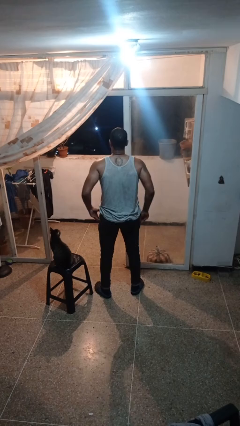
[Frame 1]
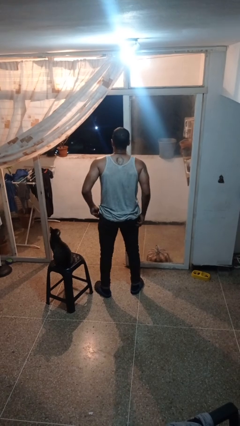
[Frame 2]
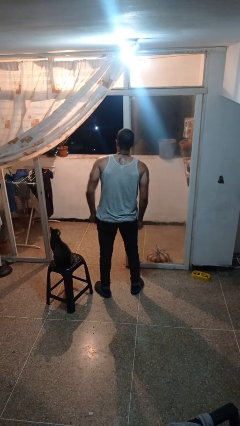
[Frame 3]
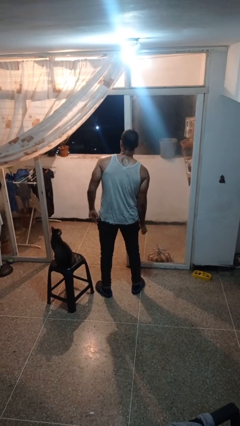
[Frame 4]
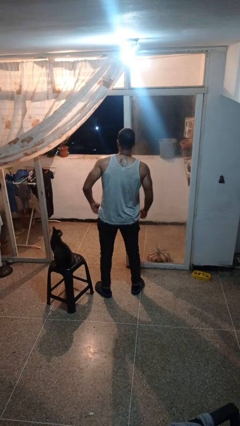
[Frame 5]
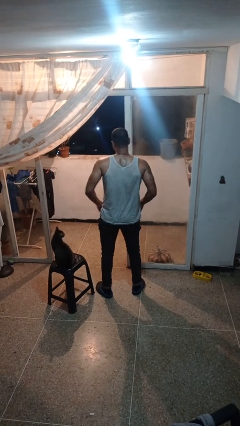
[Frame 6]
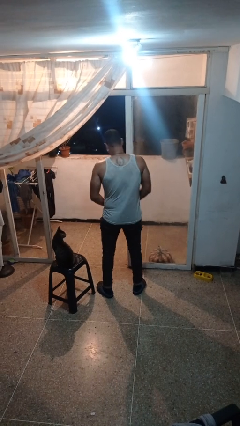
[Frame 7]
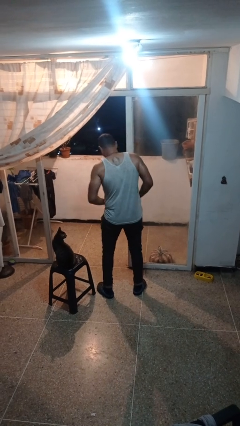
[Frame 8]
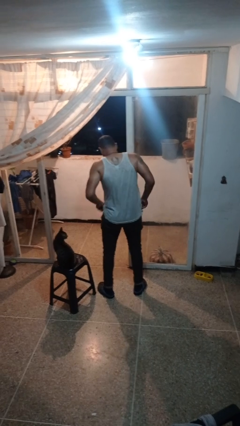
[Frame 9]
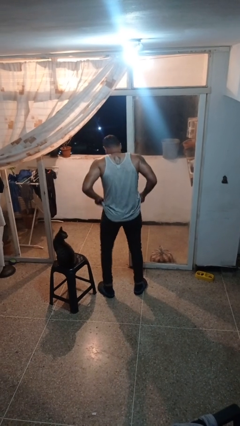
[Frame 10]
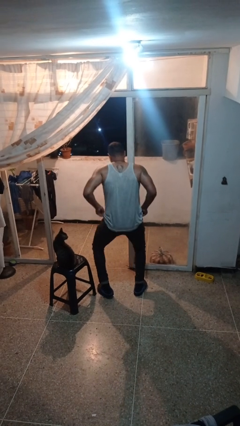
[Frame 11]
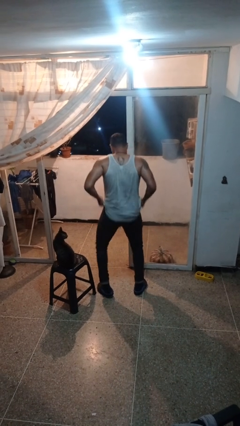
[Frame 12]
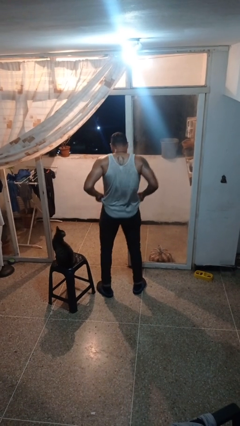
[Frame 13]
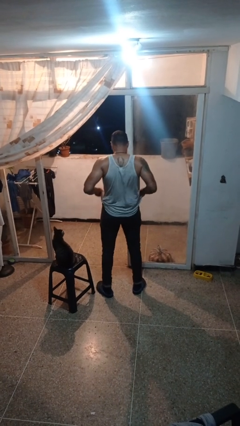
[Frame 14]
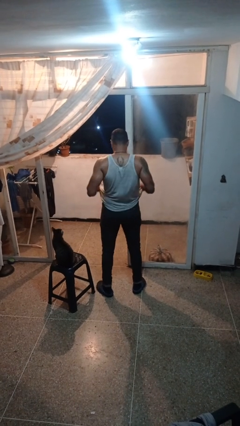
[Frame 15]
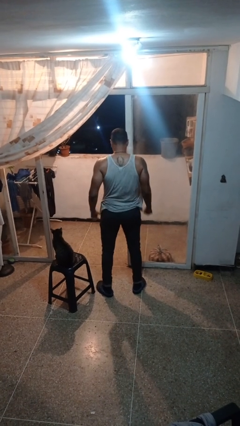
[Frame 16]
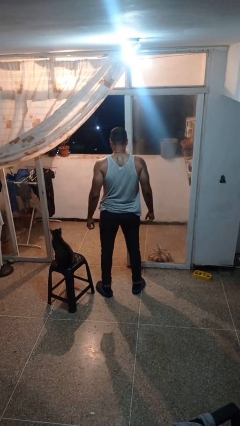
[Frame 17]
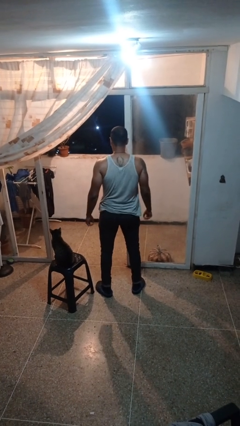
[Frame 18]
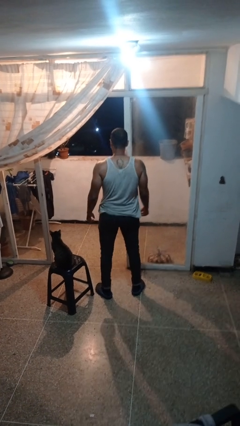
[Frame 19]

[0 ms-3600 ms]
person hikes up pants

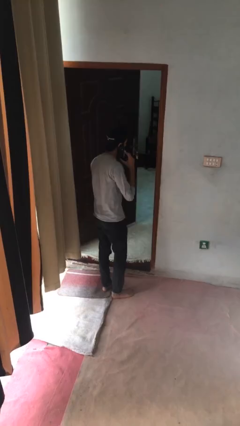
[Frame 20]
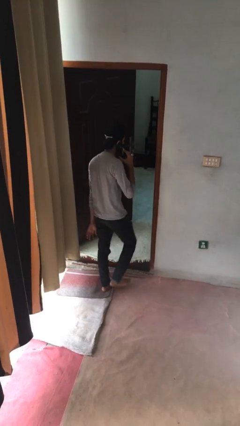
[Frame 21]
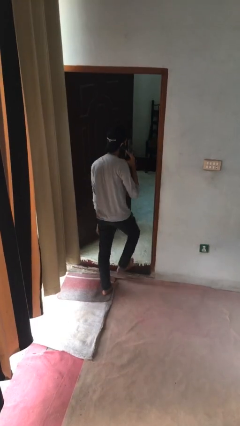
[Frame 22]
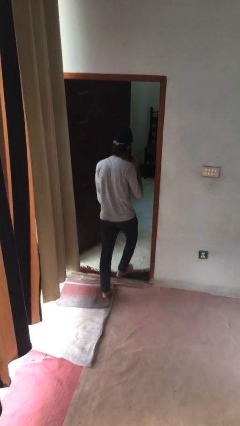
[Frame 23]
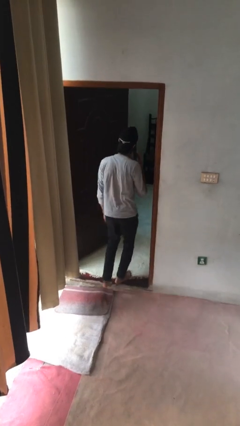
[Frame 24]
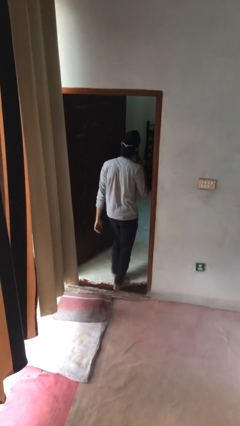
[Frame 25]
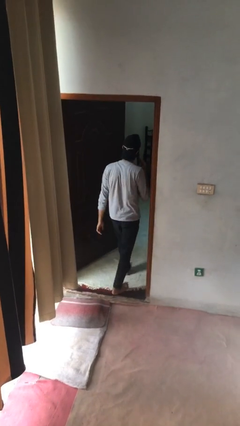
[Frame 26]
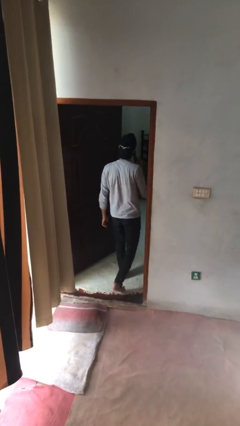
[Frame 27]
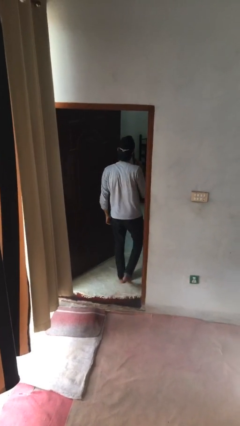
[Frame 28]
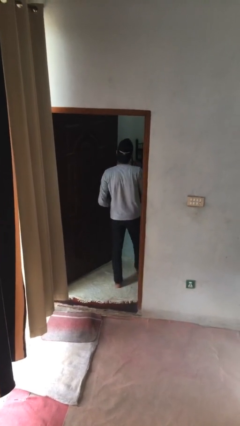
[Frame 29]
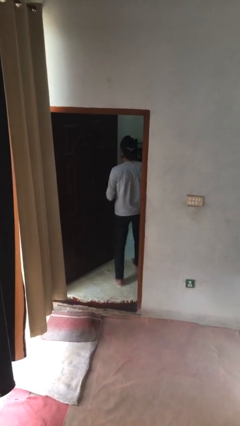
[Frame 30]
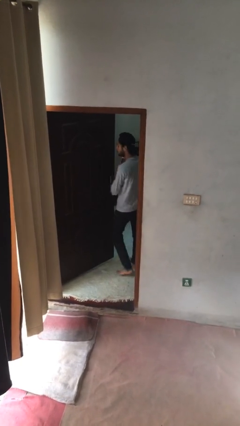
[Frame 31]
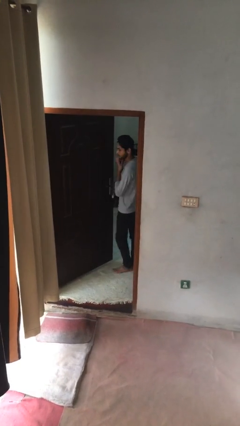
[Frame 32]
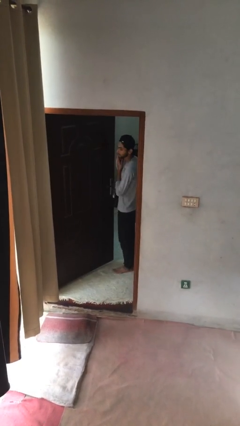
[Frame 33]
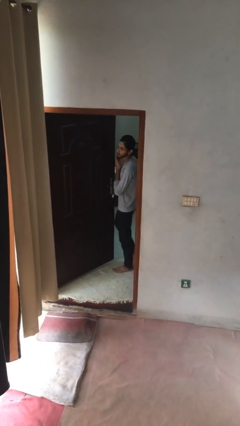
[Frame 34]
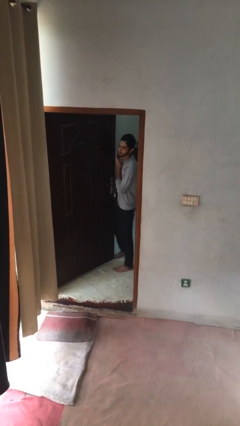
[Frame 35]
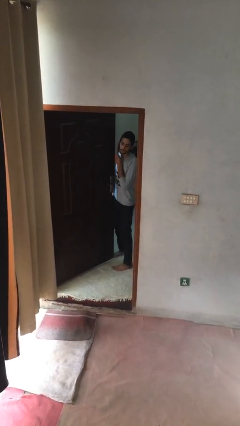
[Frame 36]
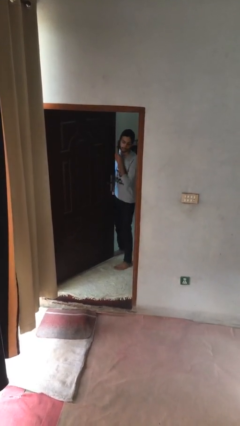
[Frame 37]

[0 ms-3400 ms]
person exits scene through structure

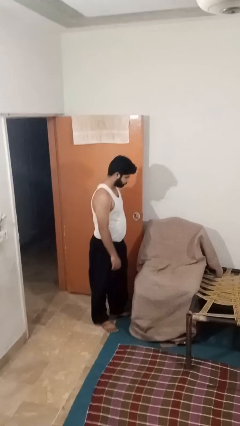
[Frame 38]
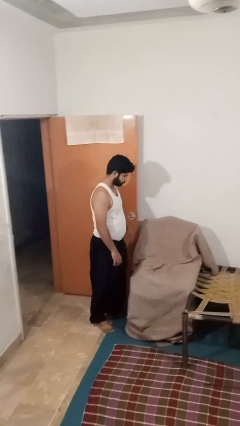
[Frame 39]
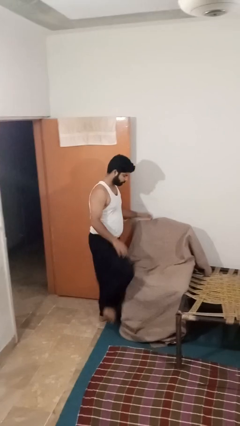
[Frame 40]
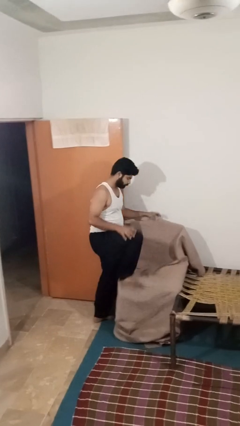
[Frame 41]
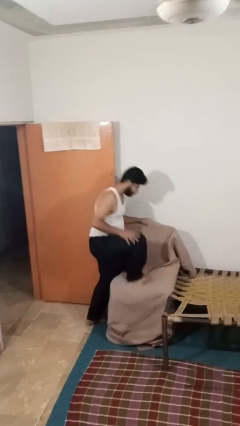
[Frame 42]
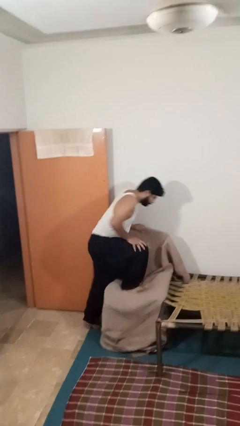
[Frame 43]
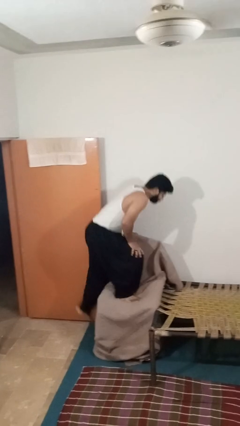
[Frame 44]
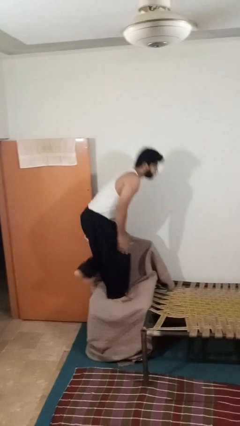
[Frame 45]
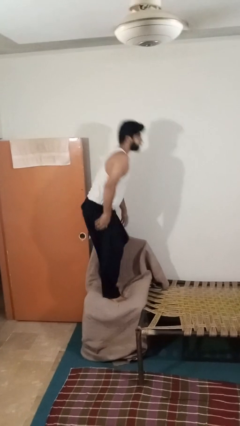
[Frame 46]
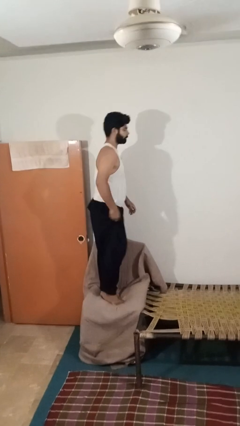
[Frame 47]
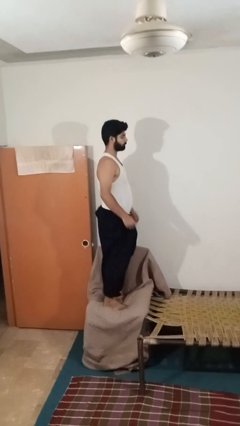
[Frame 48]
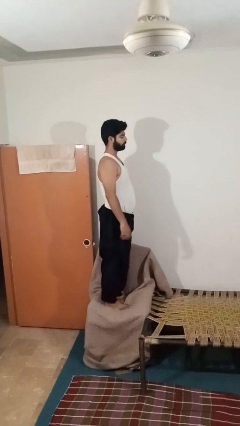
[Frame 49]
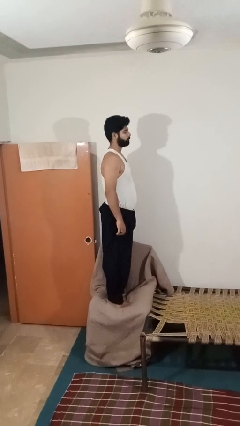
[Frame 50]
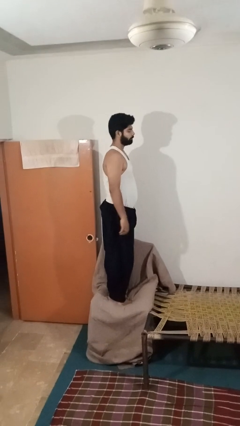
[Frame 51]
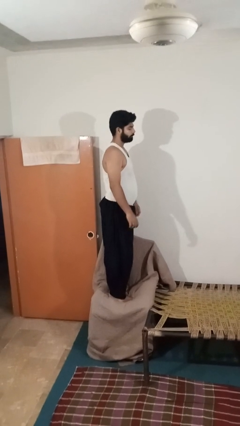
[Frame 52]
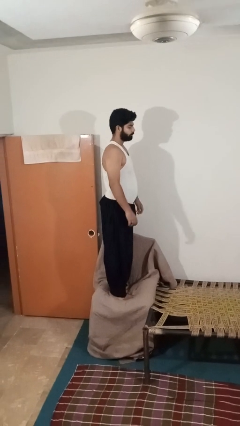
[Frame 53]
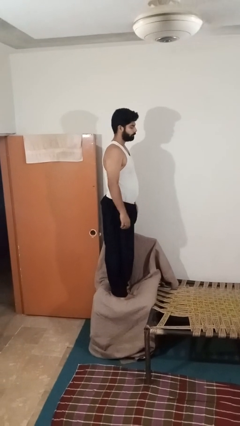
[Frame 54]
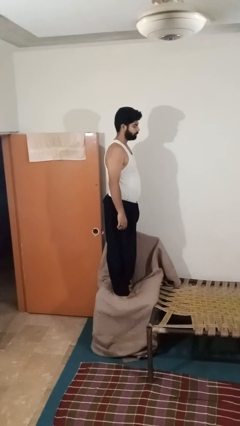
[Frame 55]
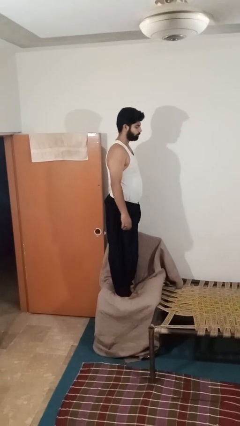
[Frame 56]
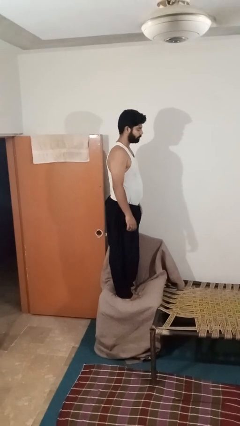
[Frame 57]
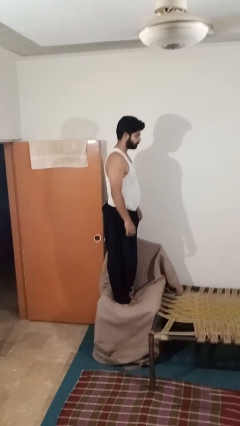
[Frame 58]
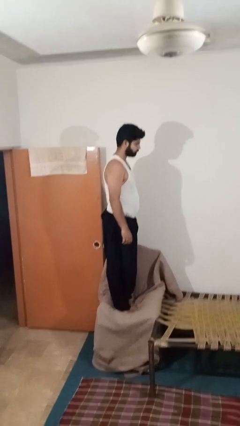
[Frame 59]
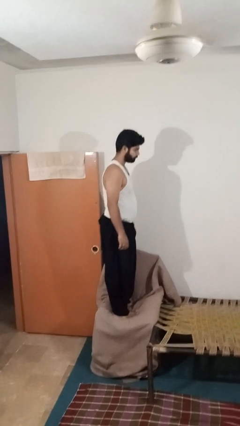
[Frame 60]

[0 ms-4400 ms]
person climbs on couch

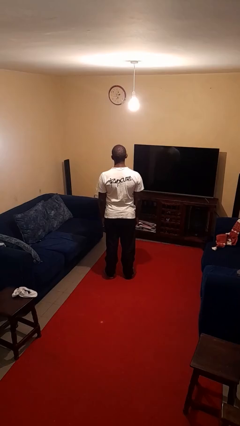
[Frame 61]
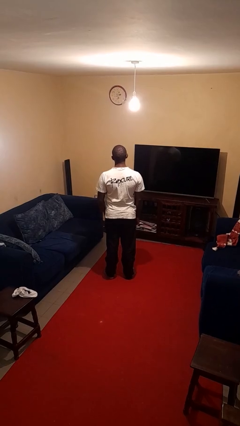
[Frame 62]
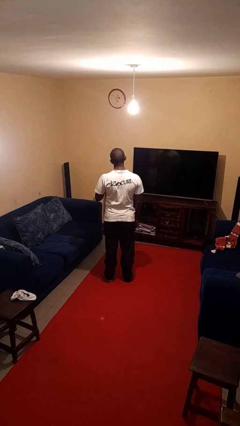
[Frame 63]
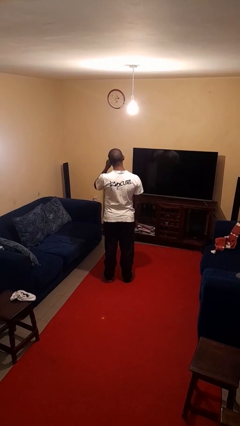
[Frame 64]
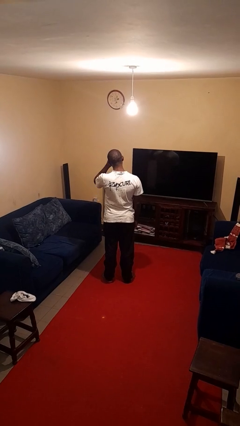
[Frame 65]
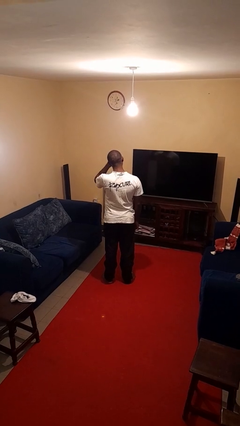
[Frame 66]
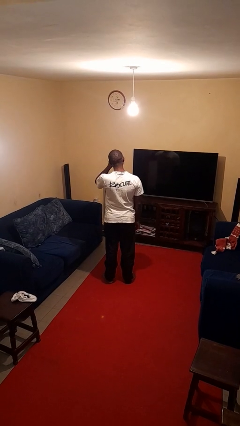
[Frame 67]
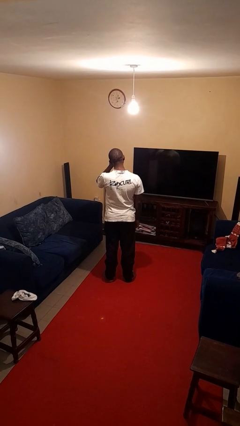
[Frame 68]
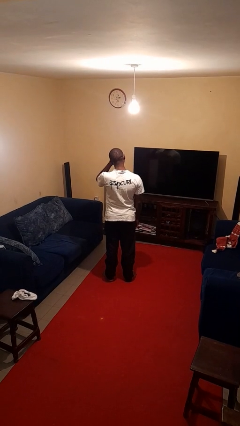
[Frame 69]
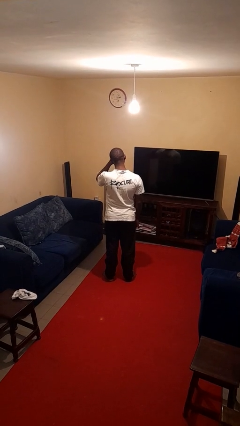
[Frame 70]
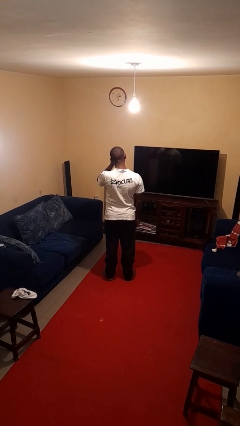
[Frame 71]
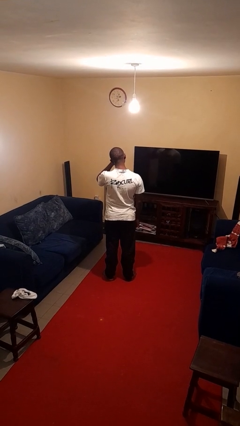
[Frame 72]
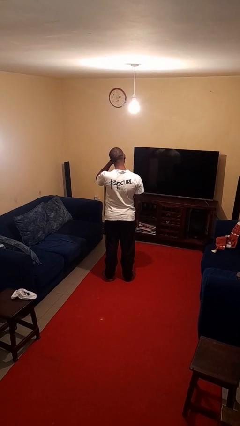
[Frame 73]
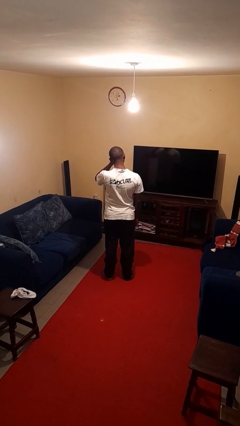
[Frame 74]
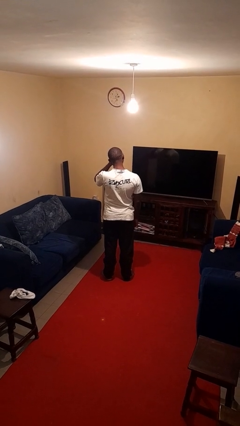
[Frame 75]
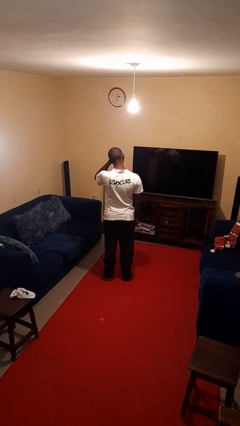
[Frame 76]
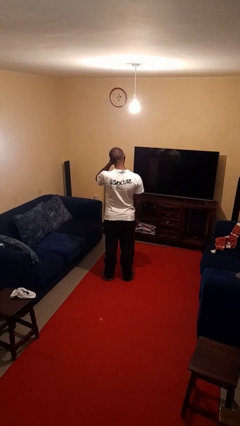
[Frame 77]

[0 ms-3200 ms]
person rubs eyes

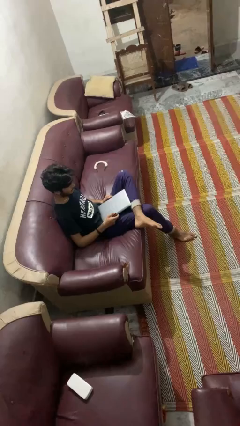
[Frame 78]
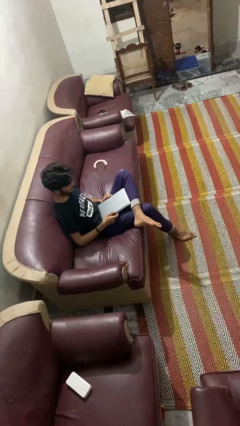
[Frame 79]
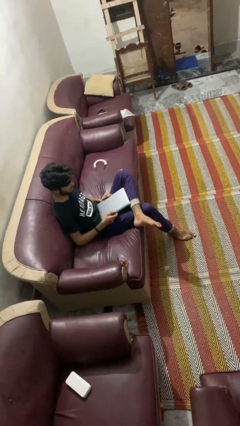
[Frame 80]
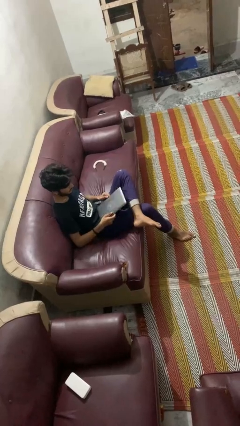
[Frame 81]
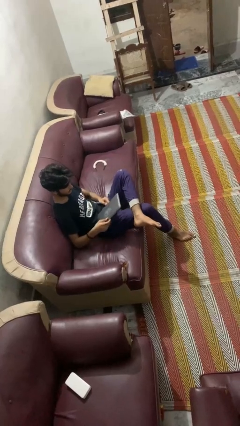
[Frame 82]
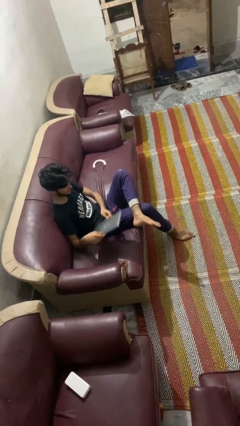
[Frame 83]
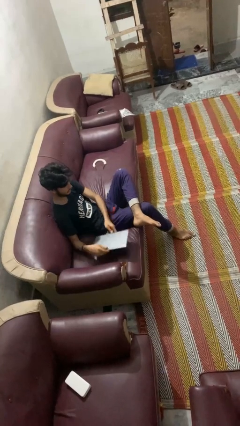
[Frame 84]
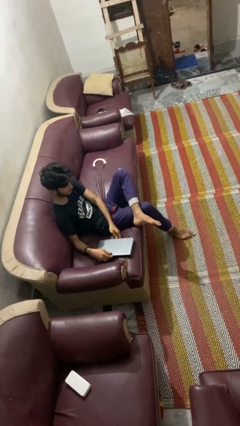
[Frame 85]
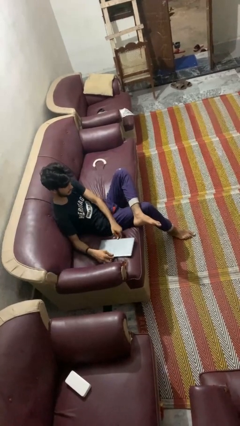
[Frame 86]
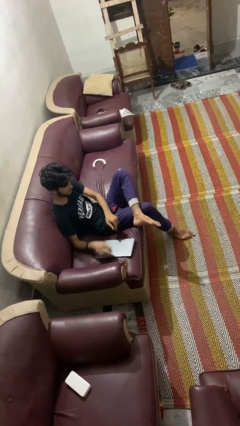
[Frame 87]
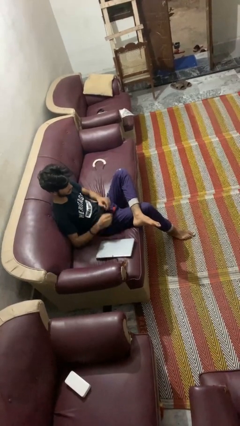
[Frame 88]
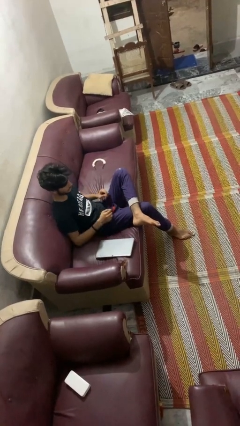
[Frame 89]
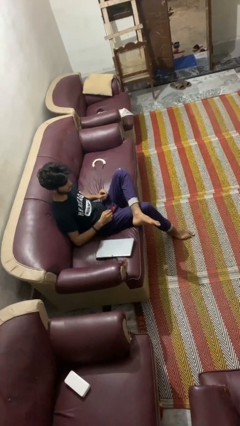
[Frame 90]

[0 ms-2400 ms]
person puts down object on couch

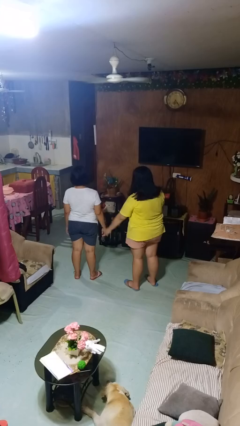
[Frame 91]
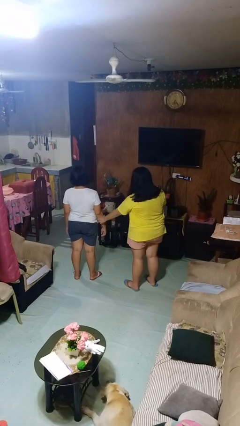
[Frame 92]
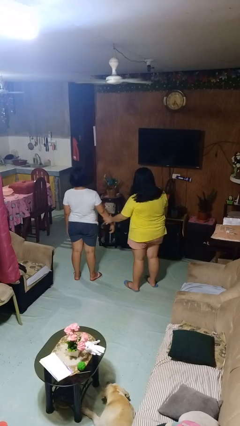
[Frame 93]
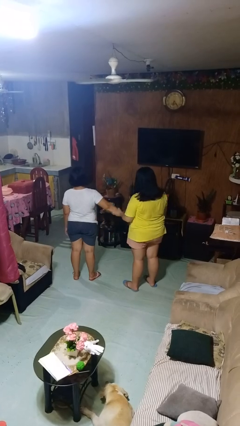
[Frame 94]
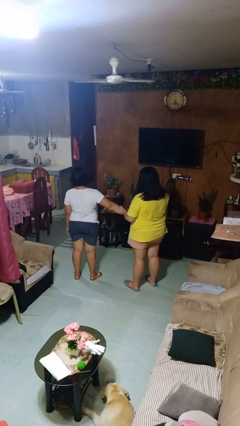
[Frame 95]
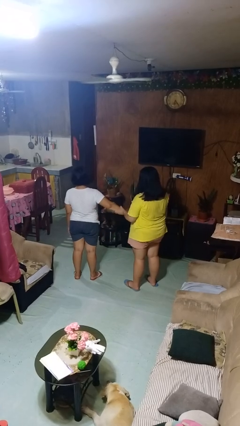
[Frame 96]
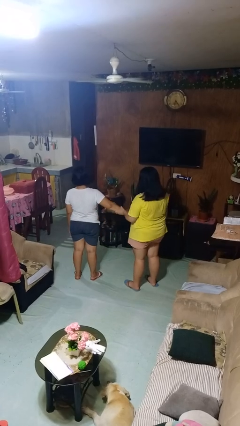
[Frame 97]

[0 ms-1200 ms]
person grabs person by forearm
